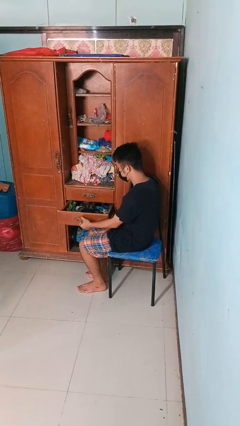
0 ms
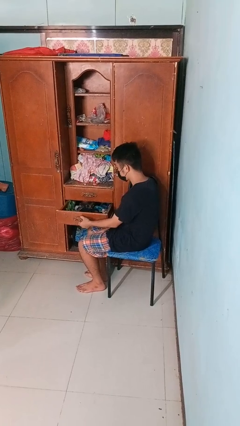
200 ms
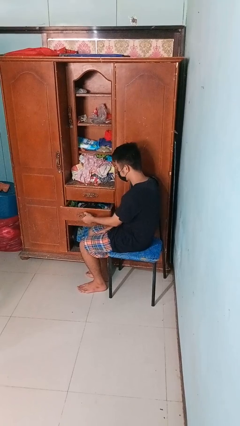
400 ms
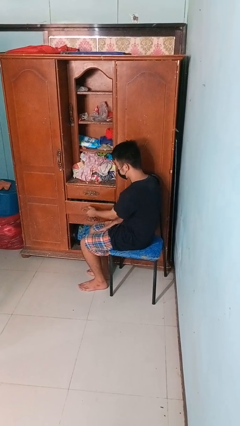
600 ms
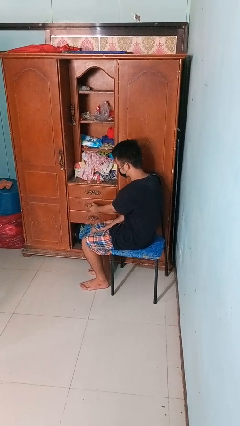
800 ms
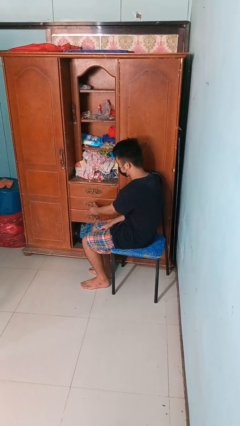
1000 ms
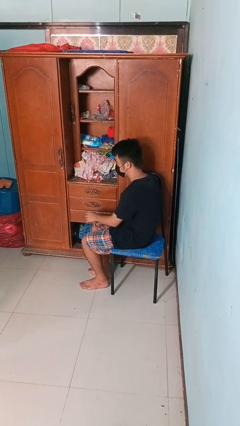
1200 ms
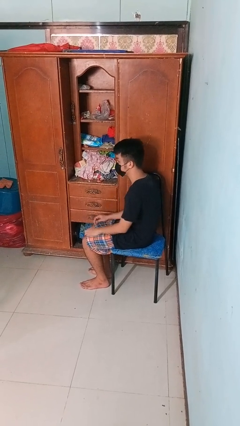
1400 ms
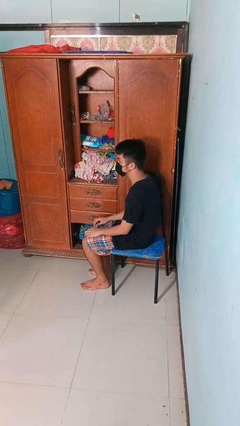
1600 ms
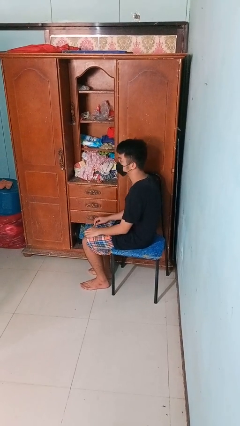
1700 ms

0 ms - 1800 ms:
person closes dresser drawer

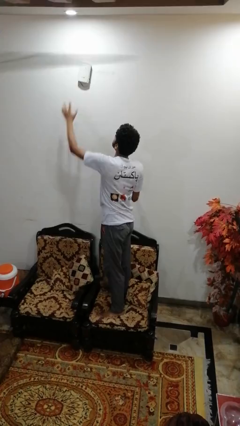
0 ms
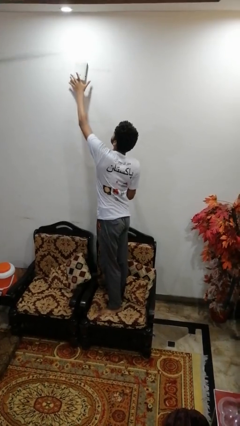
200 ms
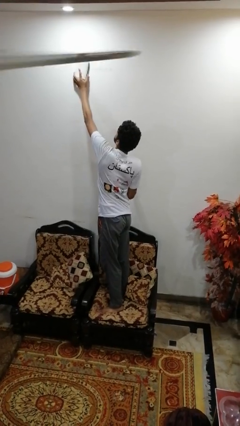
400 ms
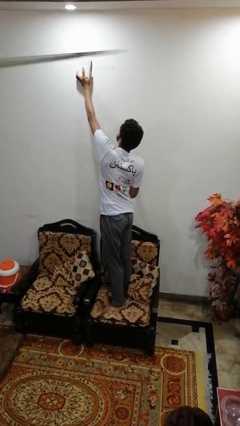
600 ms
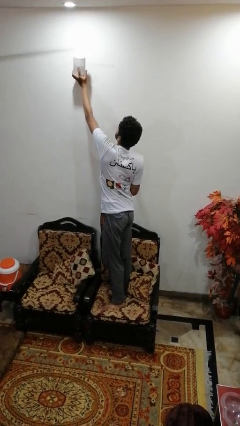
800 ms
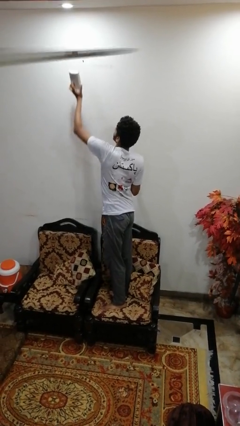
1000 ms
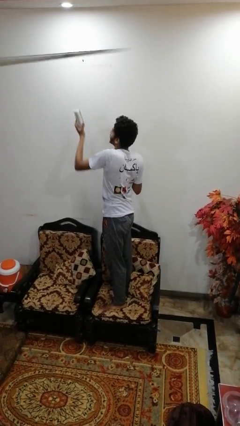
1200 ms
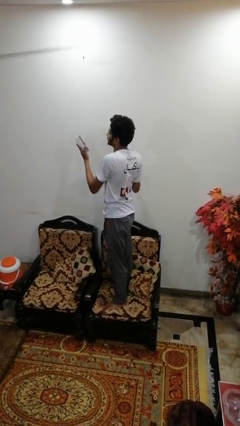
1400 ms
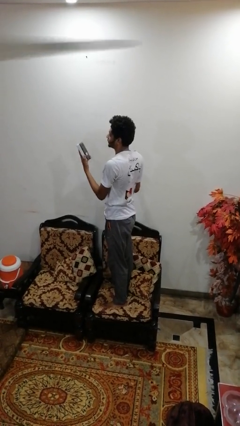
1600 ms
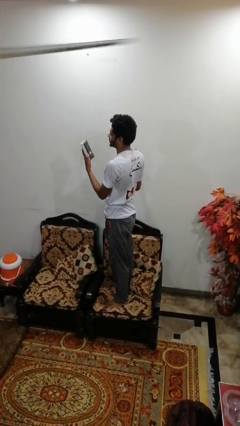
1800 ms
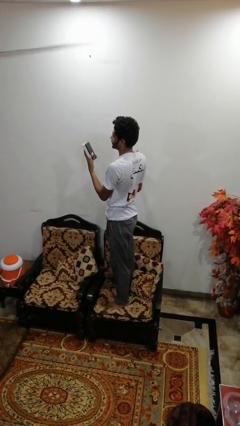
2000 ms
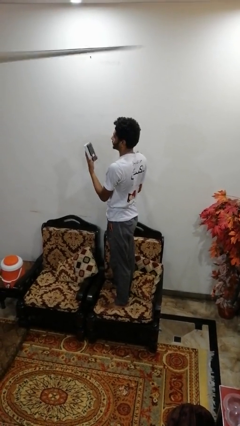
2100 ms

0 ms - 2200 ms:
person takes down smoke detector

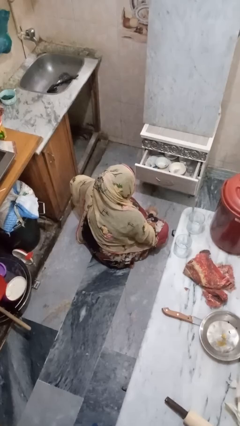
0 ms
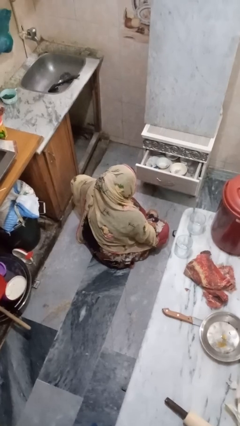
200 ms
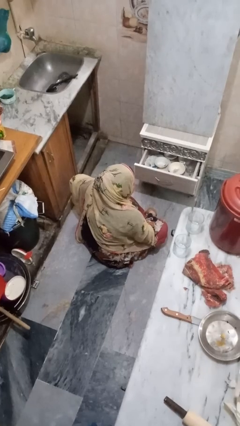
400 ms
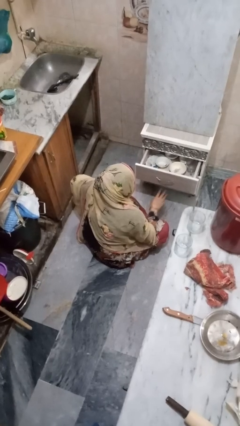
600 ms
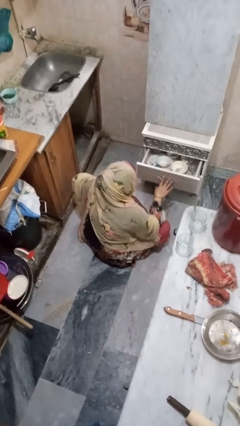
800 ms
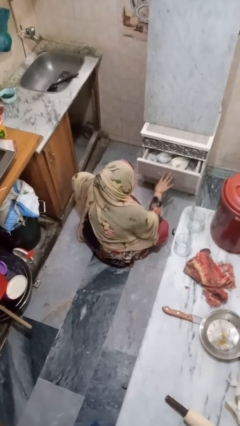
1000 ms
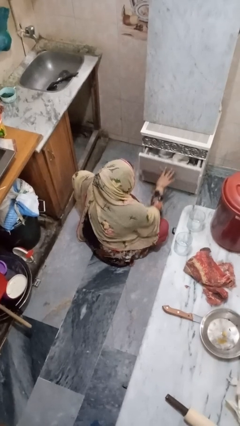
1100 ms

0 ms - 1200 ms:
person closes kitchen drawer

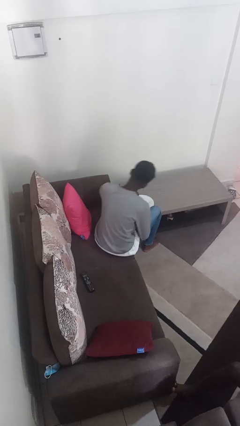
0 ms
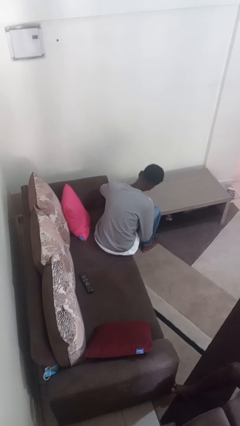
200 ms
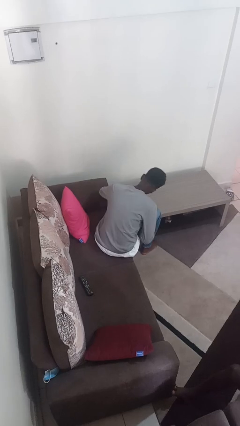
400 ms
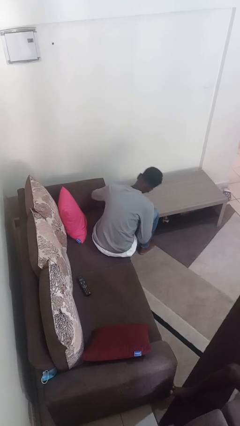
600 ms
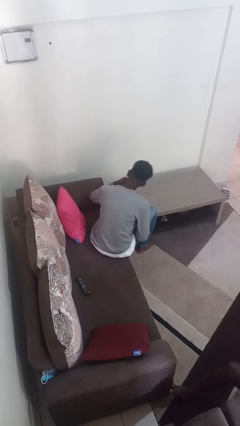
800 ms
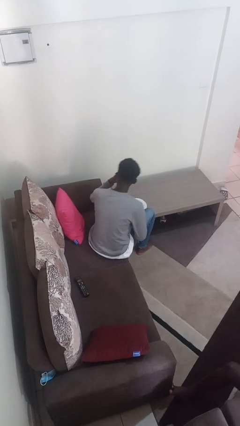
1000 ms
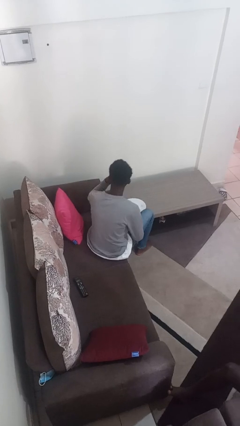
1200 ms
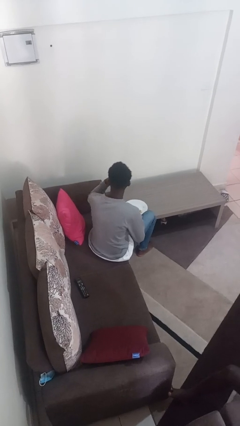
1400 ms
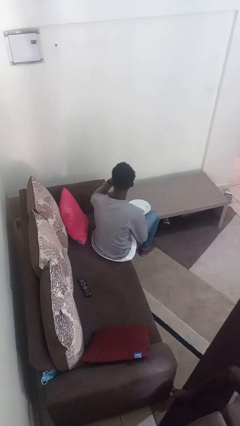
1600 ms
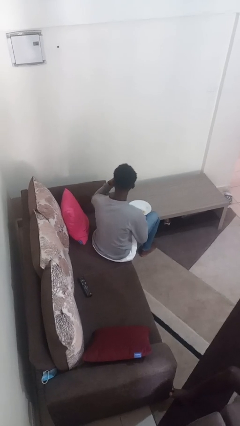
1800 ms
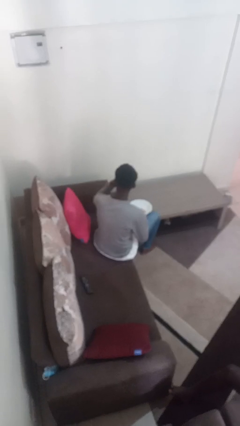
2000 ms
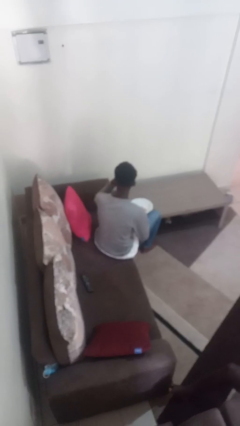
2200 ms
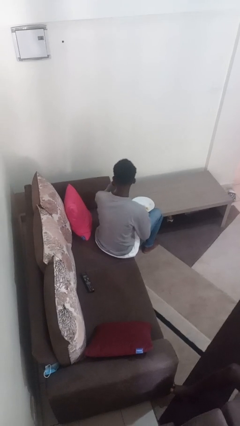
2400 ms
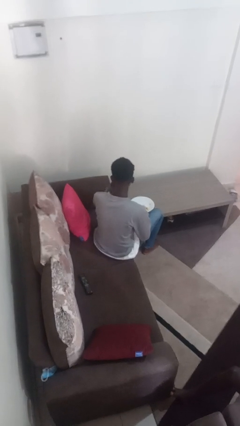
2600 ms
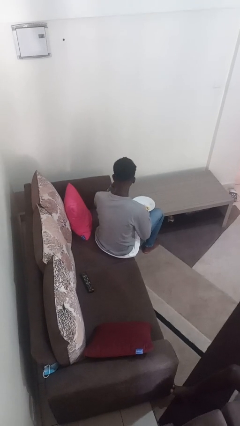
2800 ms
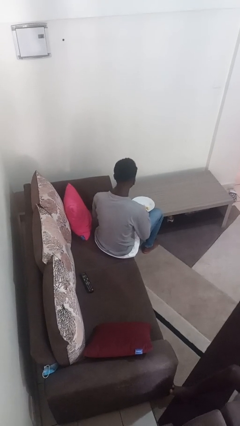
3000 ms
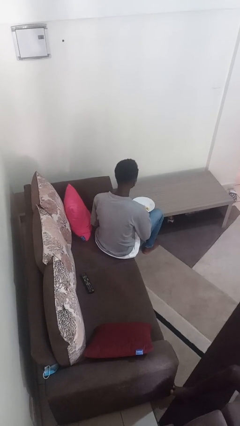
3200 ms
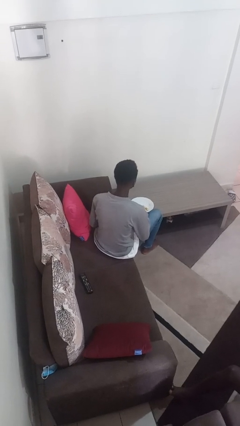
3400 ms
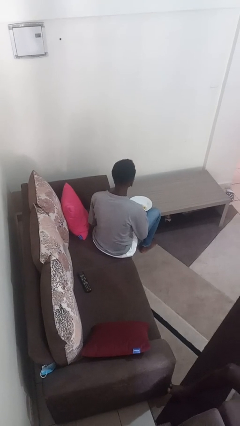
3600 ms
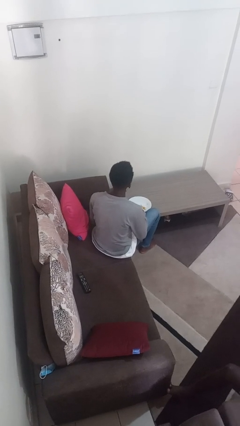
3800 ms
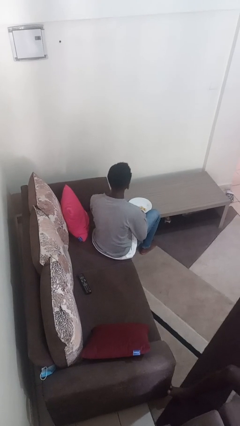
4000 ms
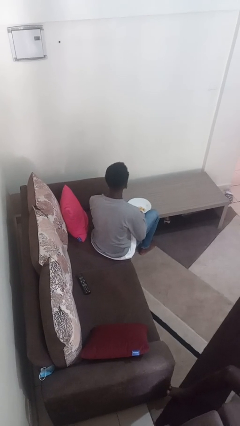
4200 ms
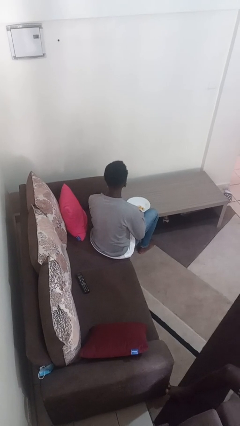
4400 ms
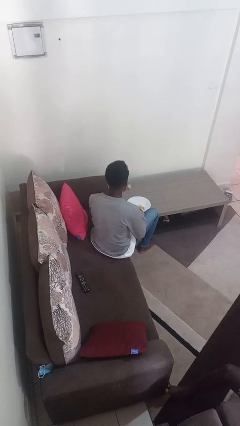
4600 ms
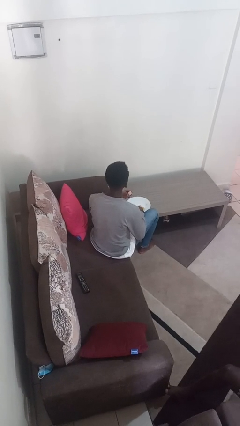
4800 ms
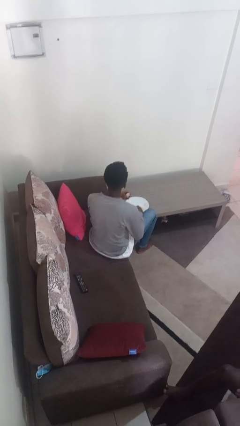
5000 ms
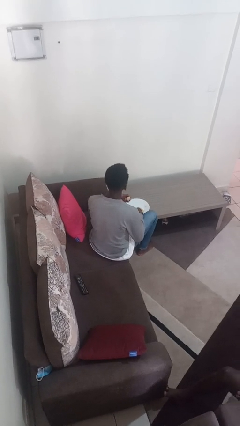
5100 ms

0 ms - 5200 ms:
person eats with hands

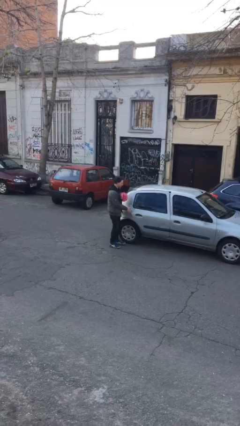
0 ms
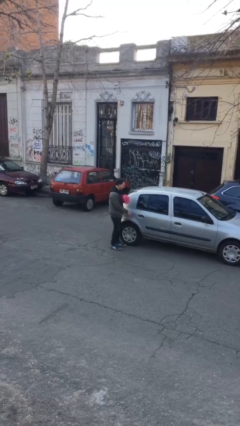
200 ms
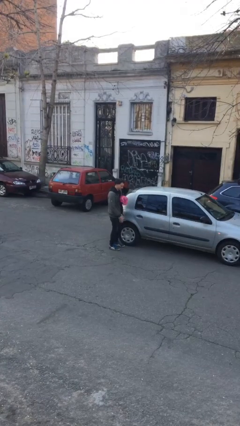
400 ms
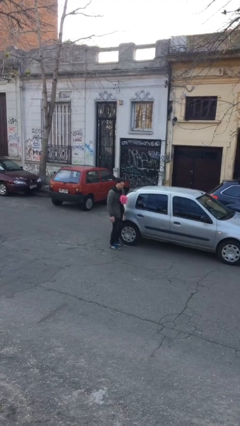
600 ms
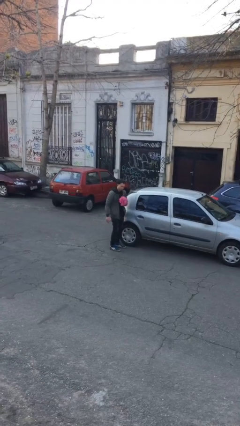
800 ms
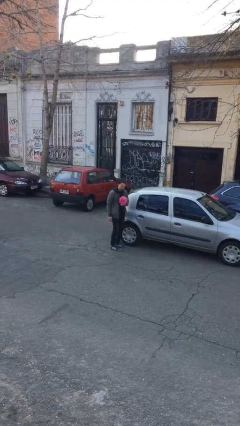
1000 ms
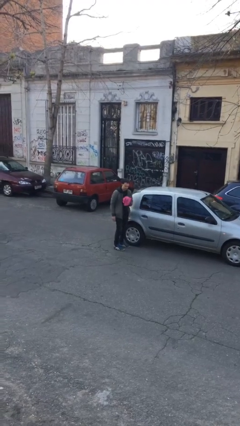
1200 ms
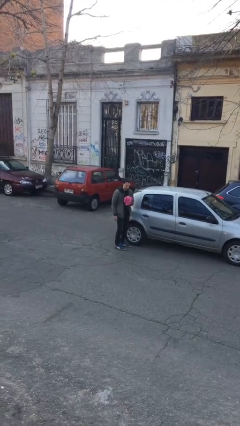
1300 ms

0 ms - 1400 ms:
person closes car door

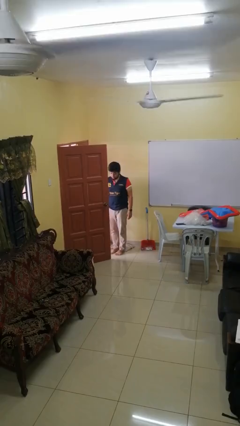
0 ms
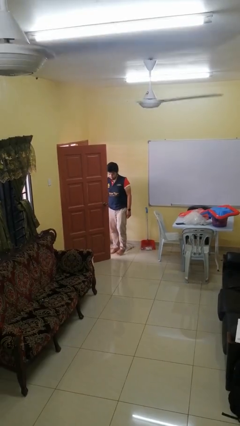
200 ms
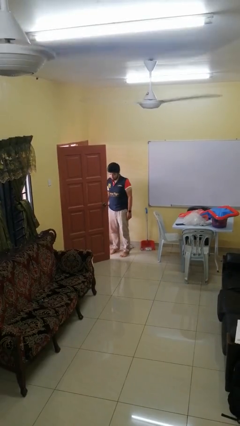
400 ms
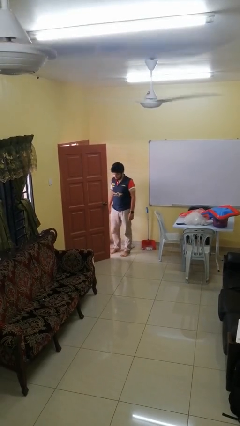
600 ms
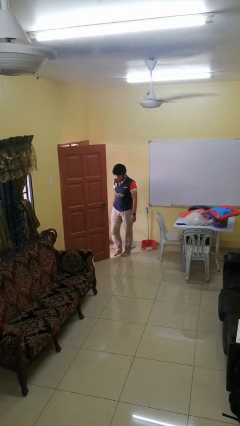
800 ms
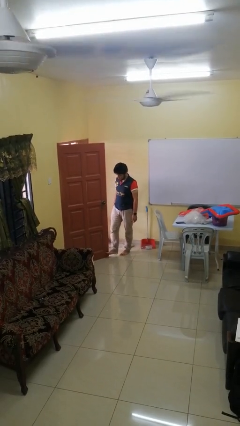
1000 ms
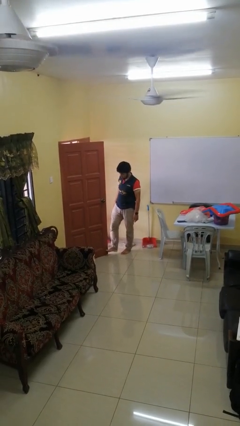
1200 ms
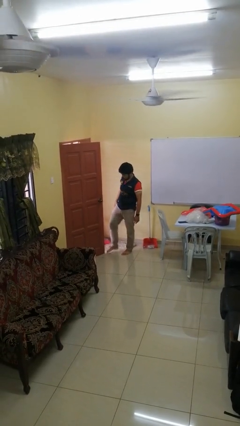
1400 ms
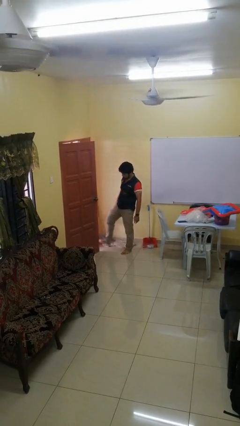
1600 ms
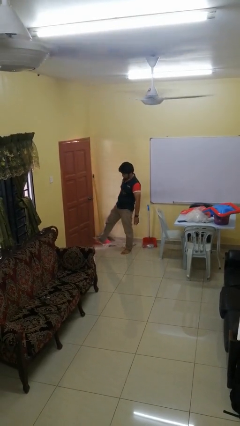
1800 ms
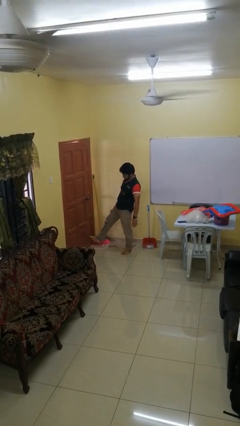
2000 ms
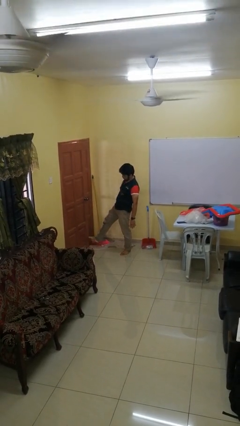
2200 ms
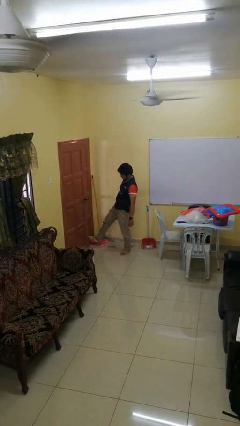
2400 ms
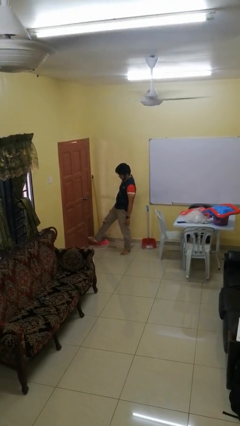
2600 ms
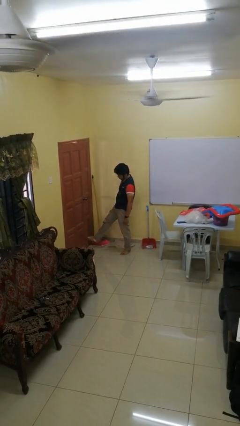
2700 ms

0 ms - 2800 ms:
person closes door with foot

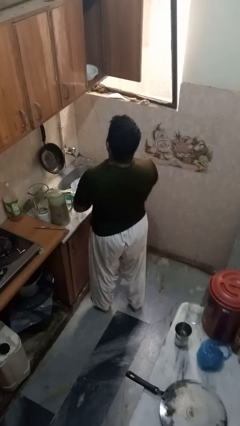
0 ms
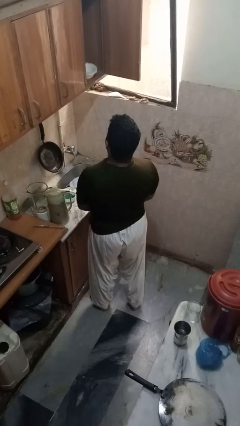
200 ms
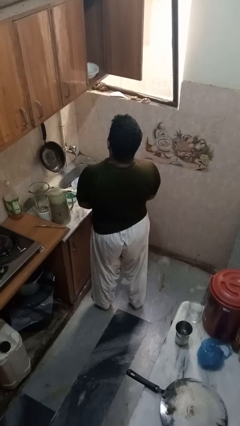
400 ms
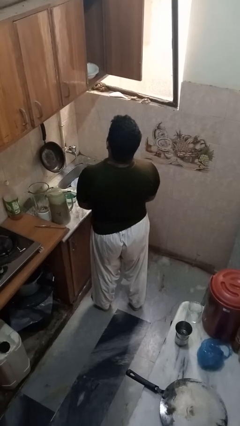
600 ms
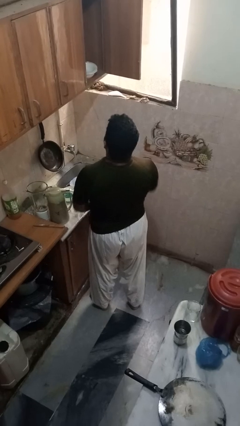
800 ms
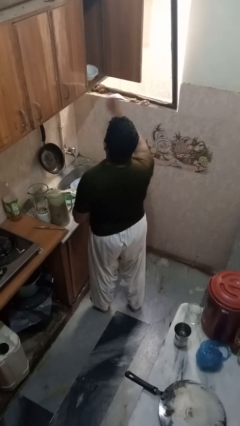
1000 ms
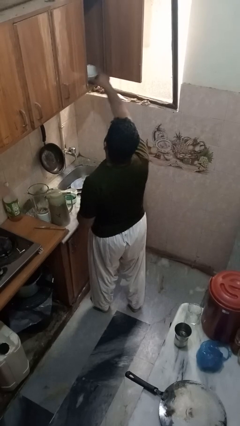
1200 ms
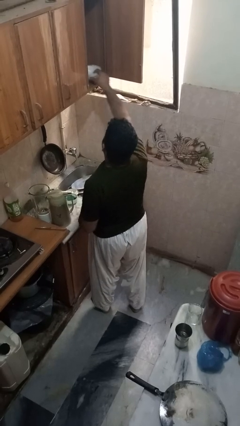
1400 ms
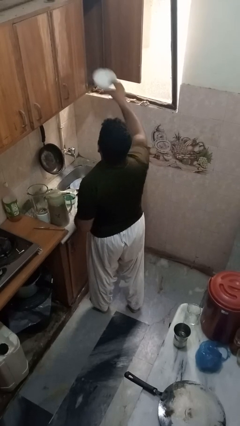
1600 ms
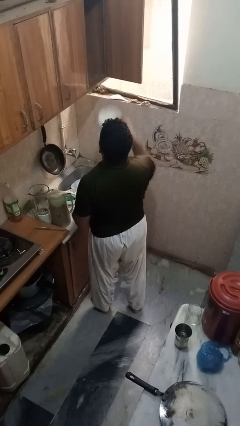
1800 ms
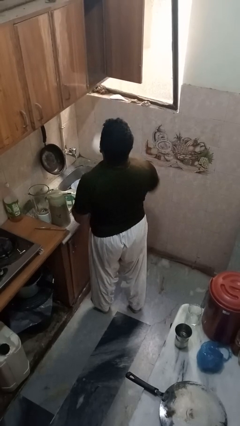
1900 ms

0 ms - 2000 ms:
person takes object from cabinet

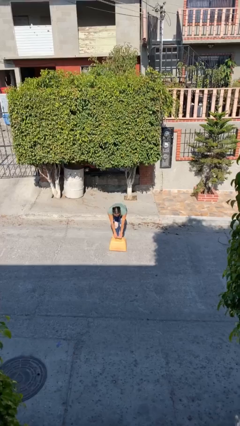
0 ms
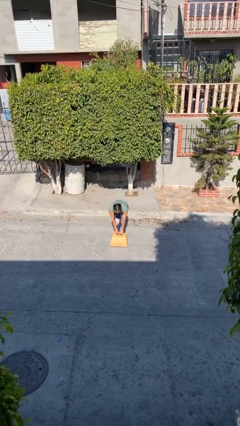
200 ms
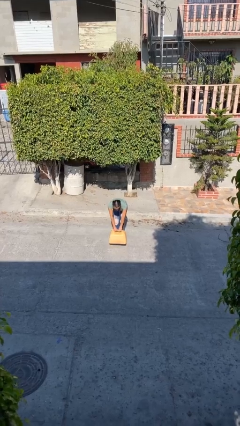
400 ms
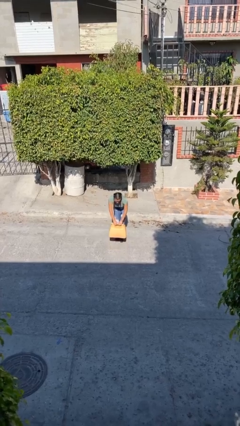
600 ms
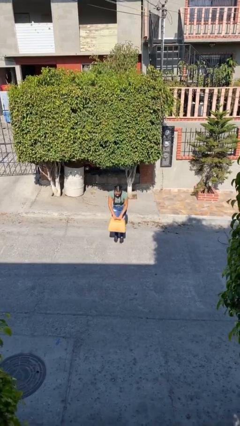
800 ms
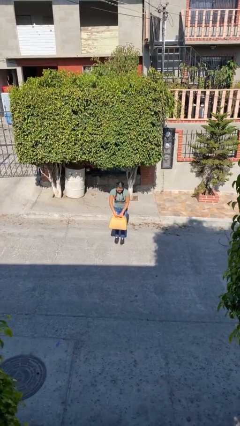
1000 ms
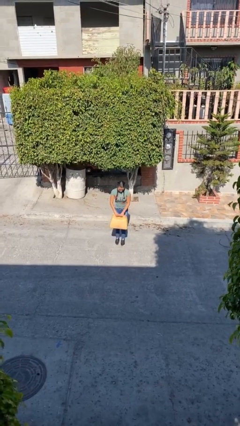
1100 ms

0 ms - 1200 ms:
person picks up object from floor
